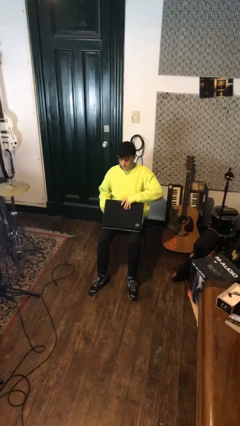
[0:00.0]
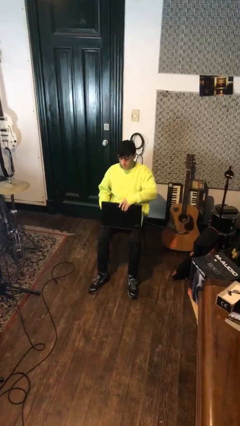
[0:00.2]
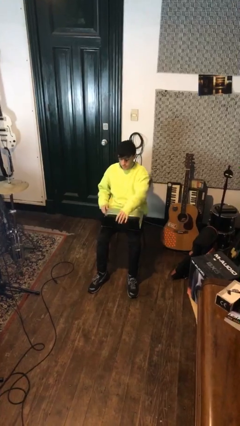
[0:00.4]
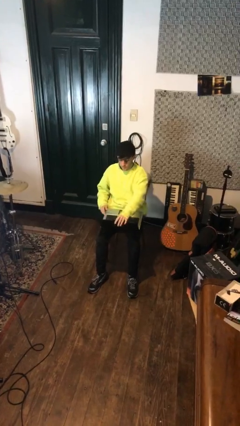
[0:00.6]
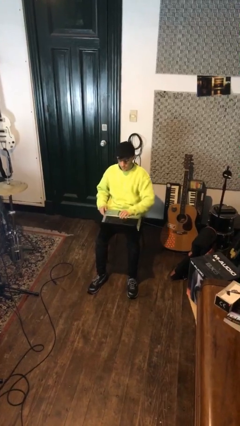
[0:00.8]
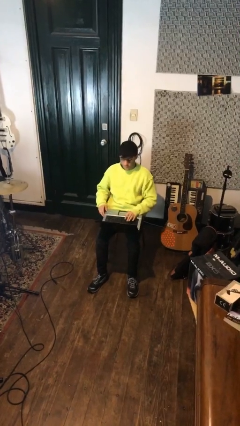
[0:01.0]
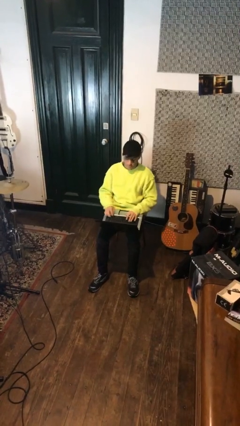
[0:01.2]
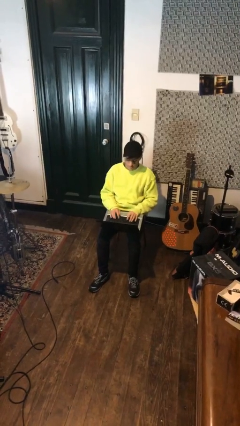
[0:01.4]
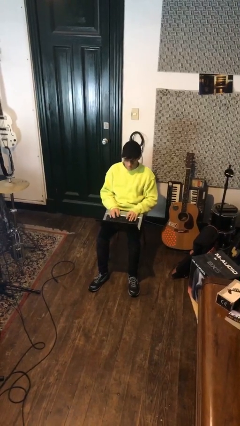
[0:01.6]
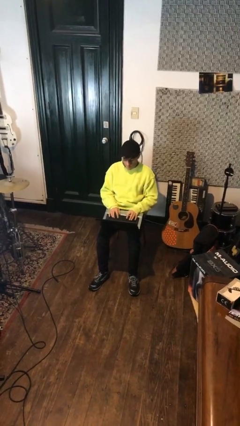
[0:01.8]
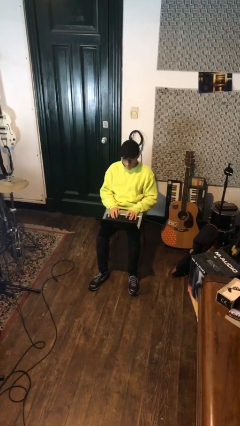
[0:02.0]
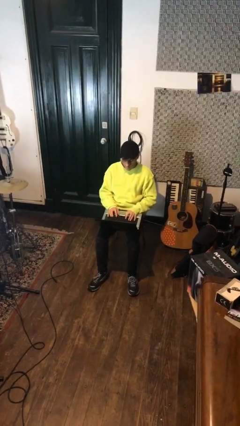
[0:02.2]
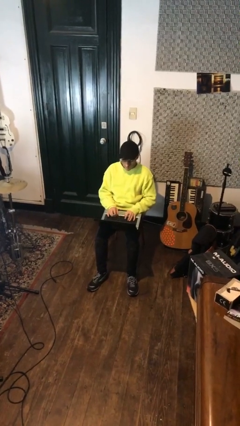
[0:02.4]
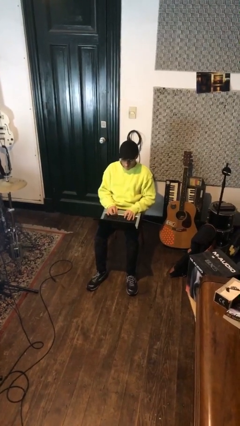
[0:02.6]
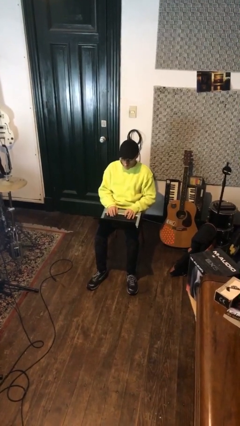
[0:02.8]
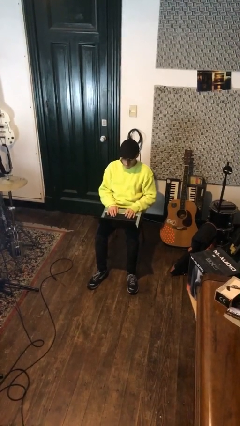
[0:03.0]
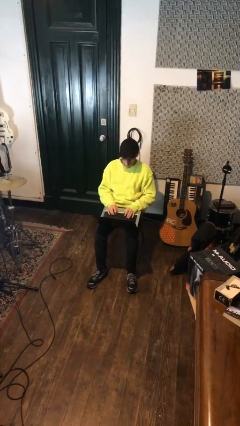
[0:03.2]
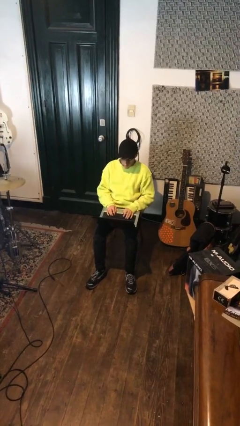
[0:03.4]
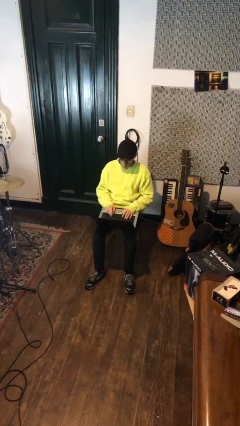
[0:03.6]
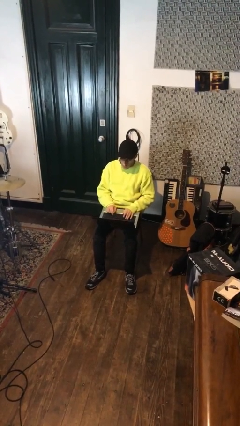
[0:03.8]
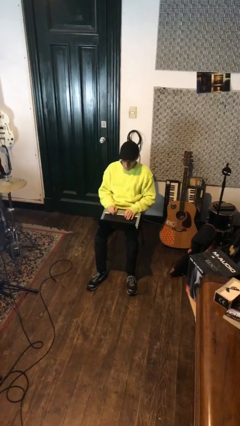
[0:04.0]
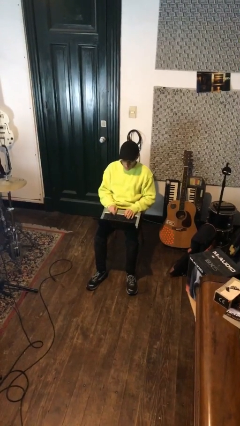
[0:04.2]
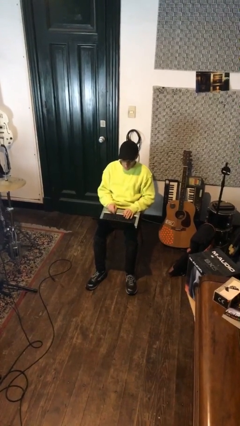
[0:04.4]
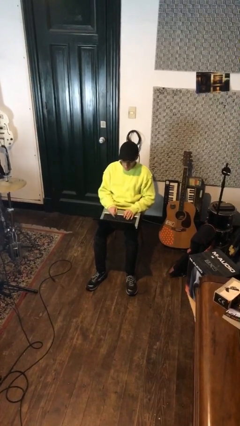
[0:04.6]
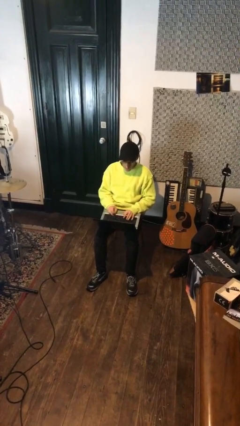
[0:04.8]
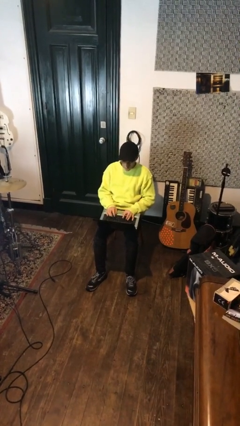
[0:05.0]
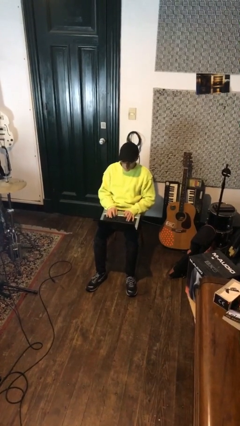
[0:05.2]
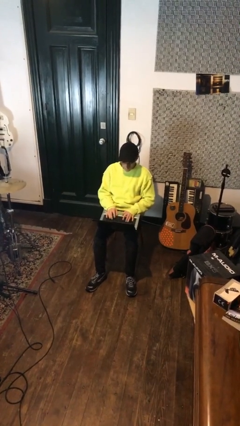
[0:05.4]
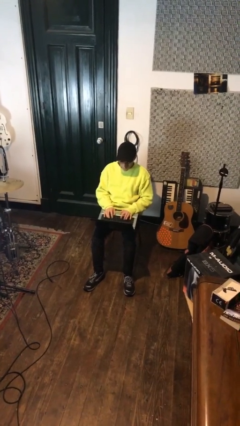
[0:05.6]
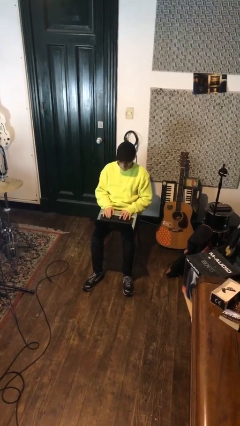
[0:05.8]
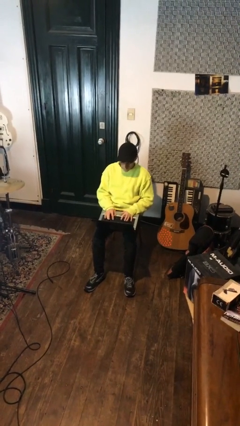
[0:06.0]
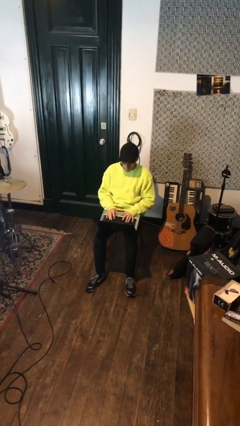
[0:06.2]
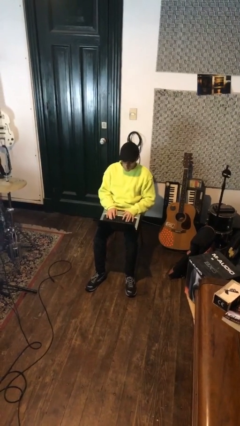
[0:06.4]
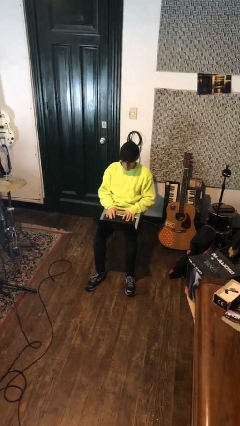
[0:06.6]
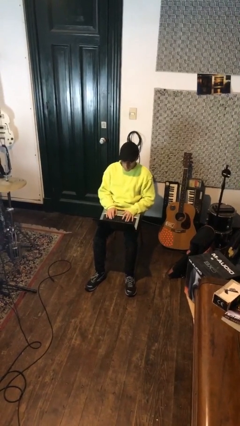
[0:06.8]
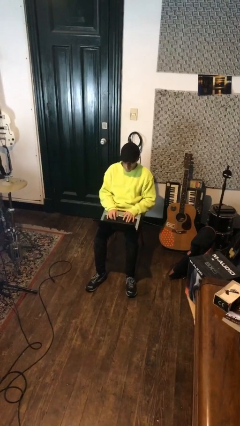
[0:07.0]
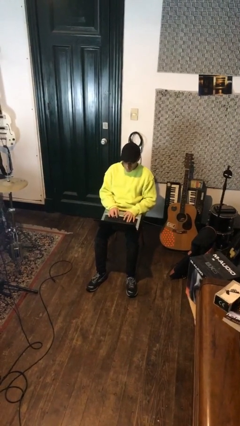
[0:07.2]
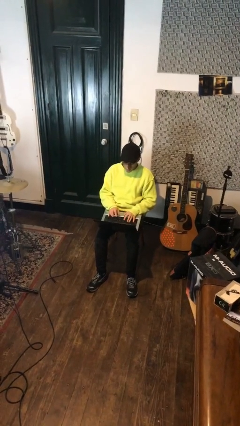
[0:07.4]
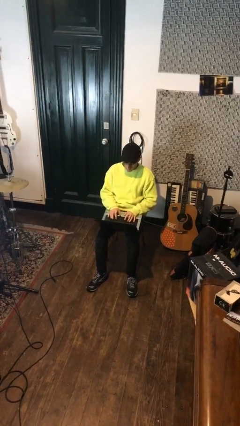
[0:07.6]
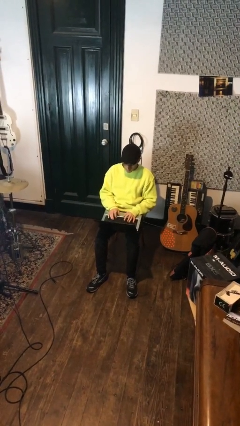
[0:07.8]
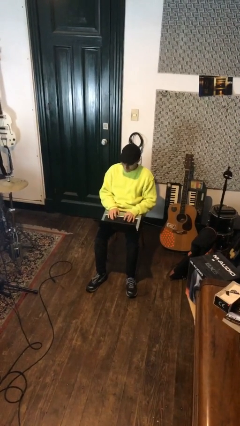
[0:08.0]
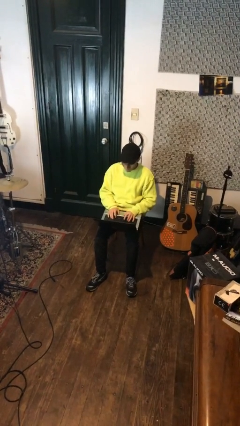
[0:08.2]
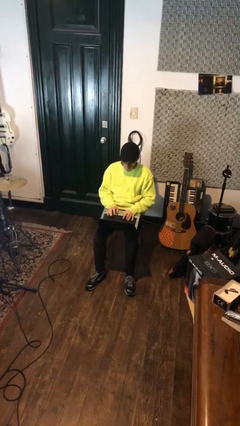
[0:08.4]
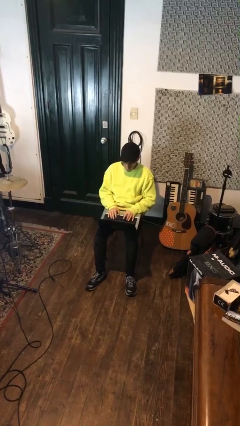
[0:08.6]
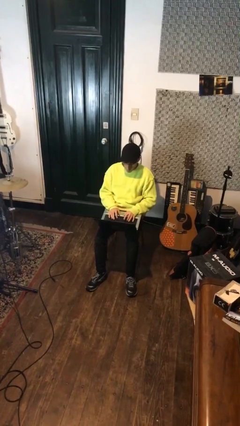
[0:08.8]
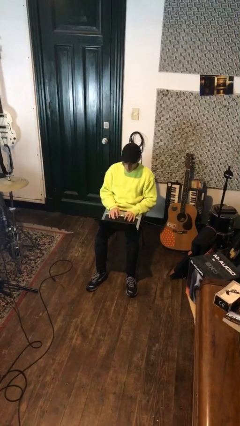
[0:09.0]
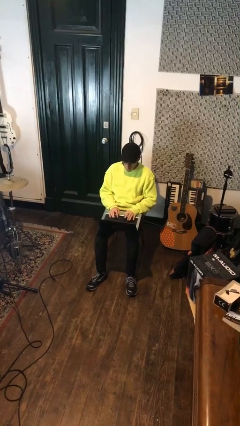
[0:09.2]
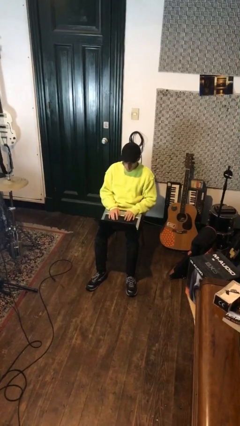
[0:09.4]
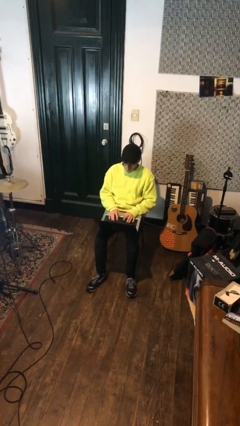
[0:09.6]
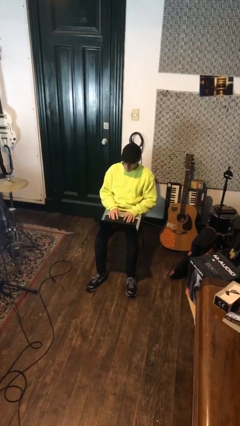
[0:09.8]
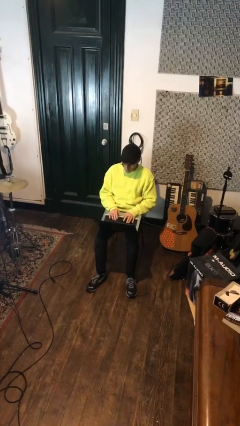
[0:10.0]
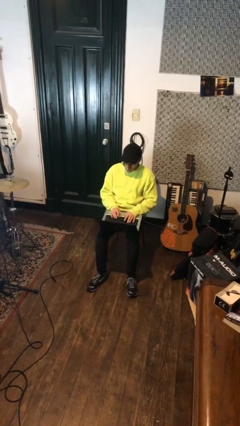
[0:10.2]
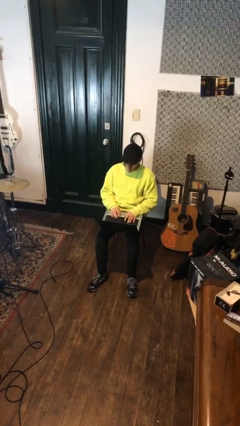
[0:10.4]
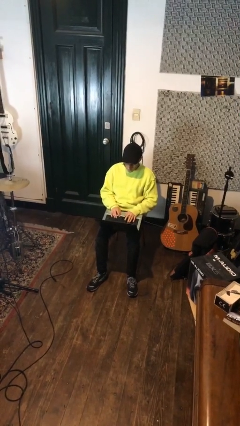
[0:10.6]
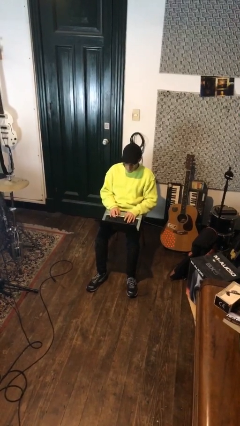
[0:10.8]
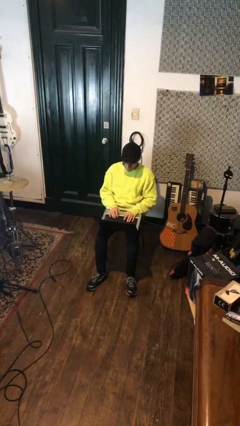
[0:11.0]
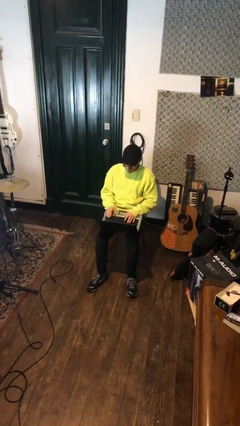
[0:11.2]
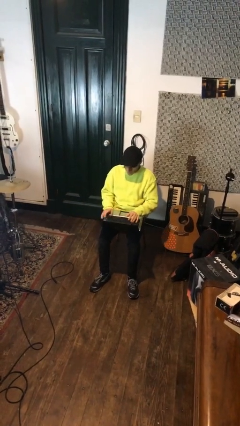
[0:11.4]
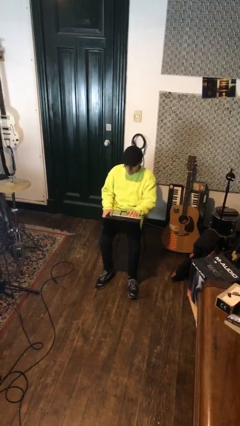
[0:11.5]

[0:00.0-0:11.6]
person interacts with laptop

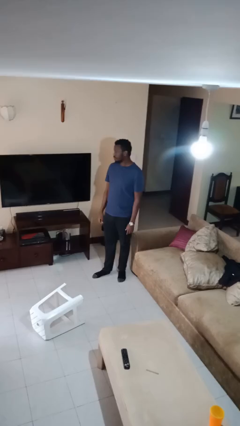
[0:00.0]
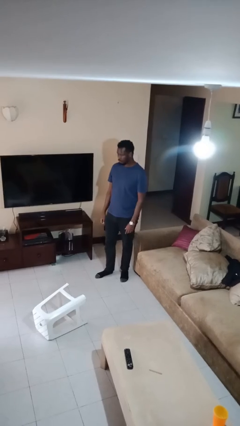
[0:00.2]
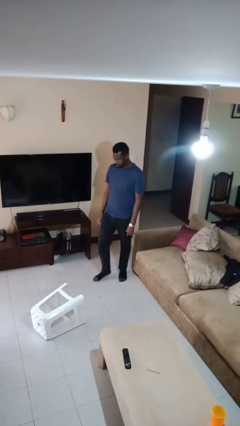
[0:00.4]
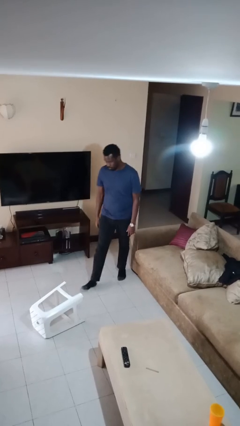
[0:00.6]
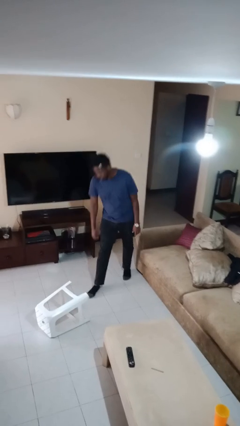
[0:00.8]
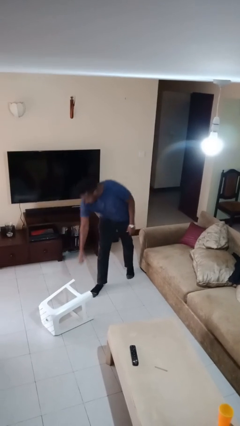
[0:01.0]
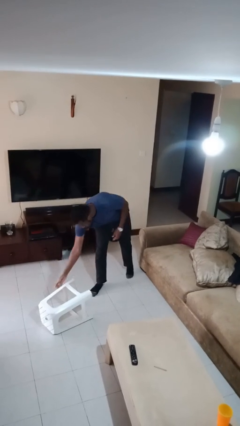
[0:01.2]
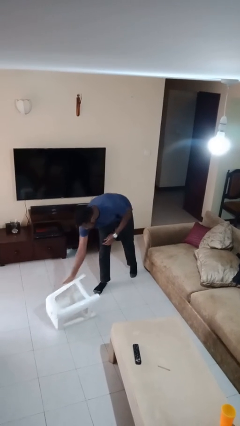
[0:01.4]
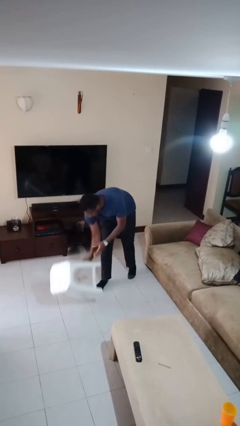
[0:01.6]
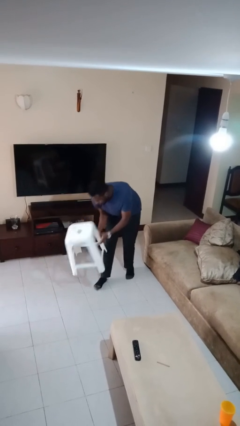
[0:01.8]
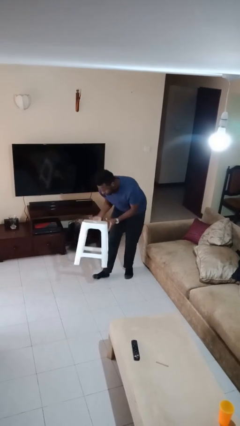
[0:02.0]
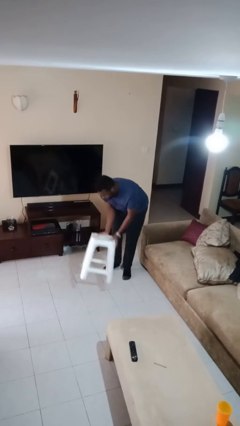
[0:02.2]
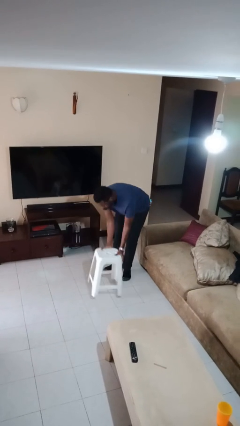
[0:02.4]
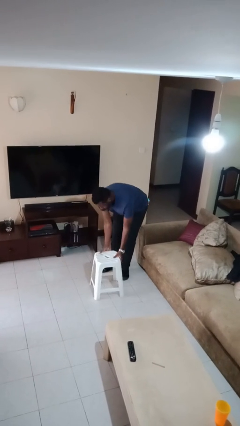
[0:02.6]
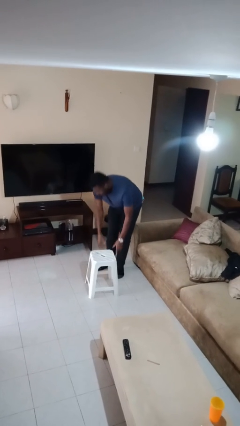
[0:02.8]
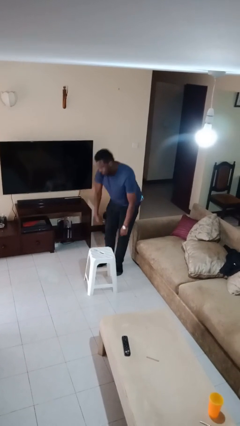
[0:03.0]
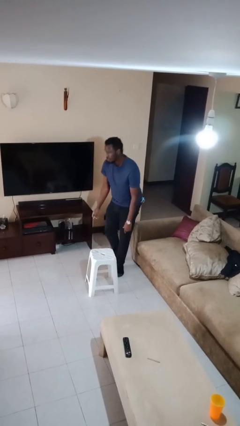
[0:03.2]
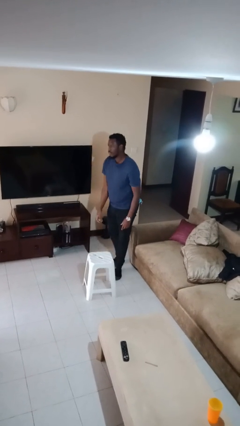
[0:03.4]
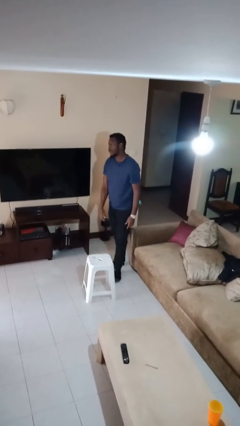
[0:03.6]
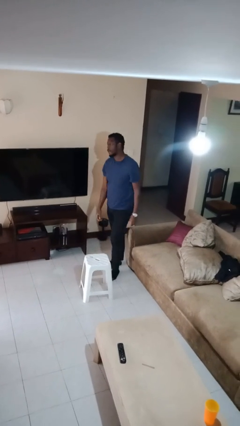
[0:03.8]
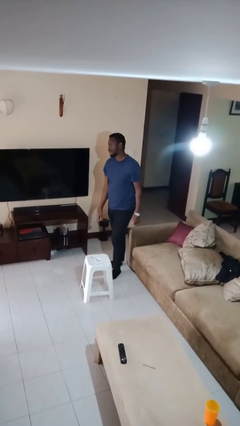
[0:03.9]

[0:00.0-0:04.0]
person sets upright furniture

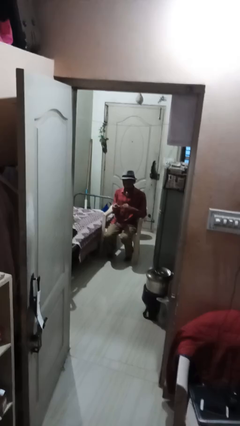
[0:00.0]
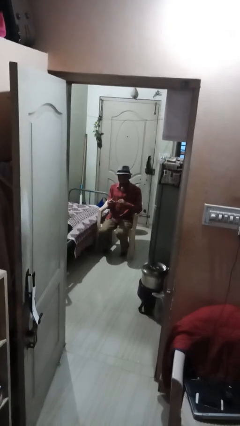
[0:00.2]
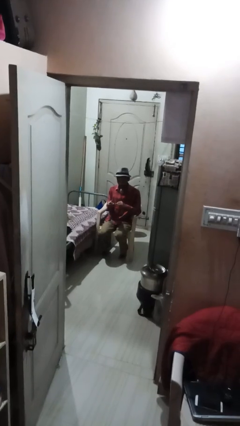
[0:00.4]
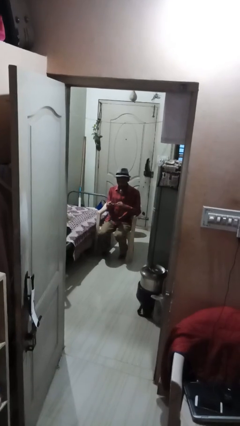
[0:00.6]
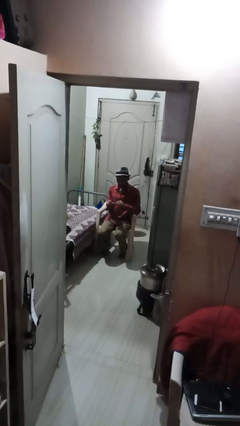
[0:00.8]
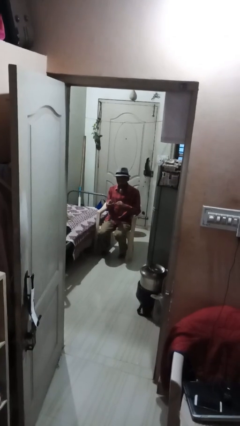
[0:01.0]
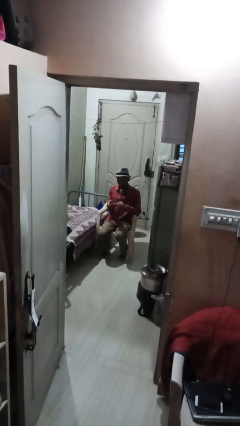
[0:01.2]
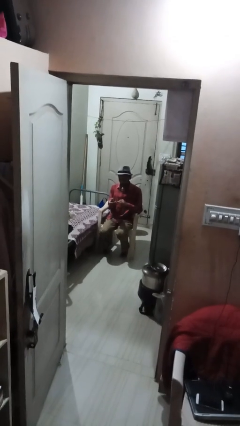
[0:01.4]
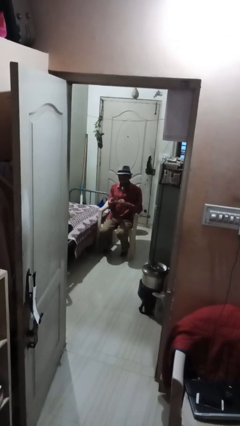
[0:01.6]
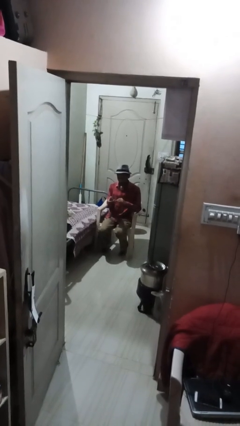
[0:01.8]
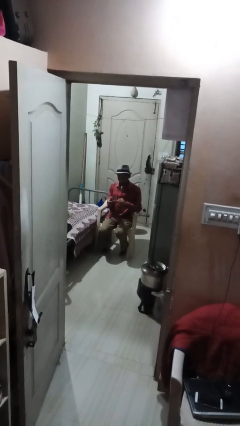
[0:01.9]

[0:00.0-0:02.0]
person clips fingernails

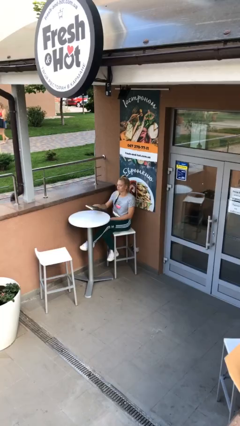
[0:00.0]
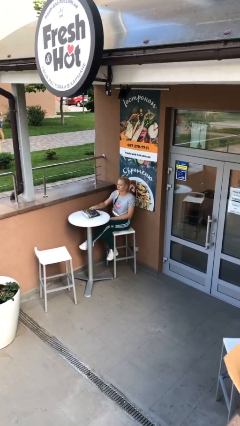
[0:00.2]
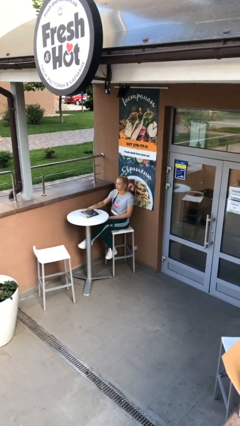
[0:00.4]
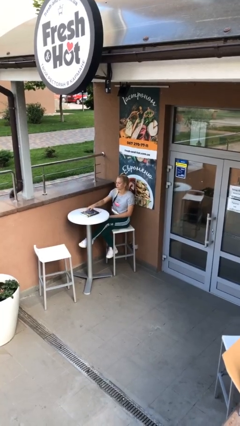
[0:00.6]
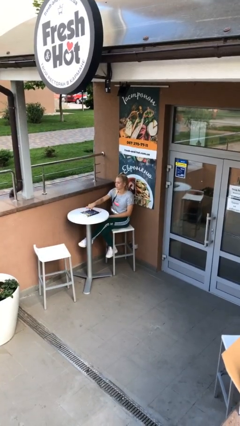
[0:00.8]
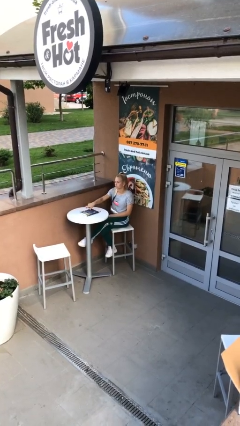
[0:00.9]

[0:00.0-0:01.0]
person puts down object on table
